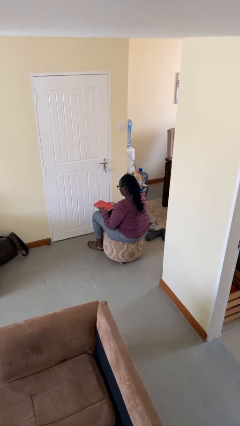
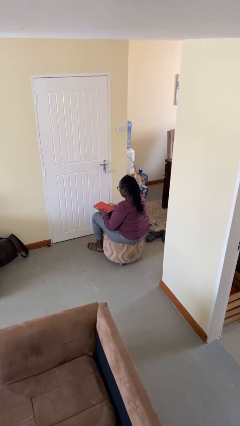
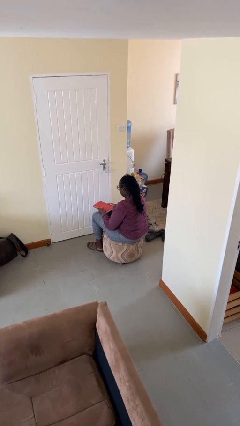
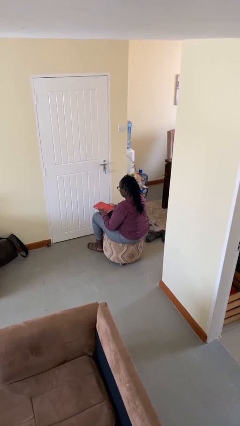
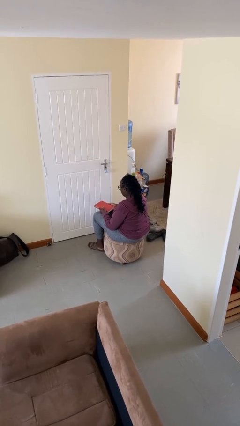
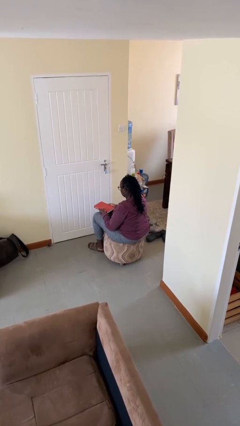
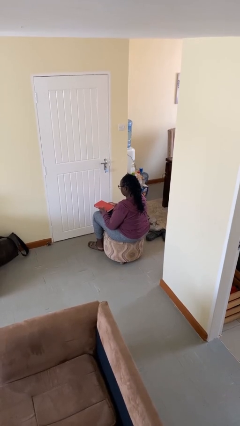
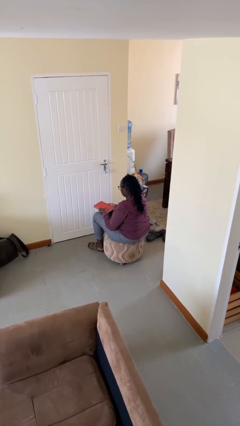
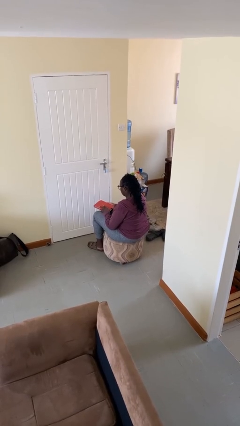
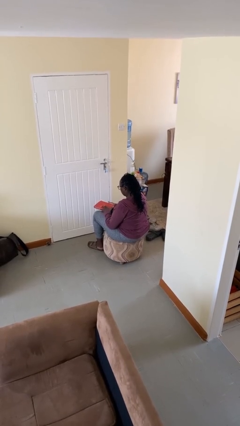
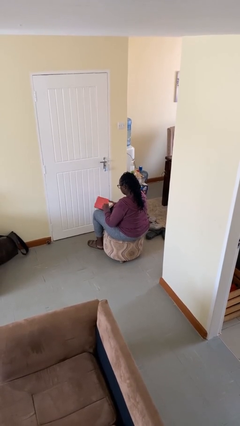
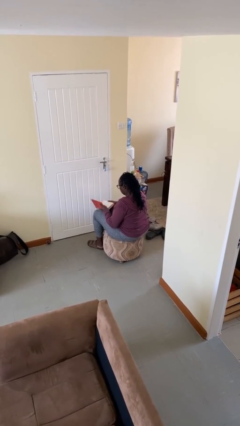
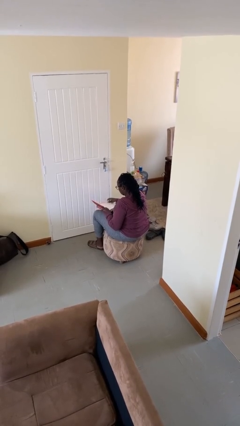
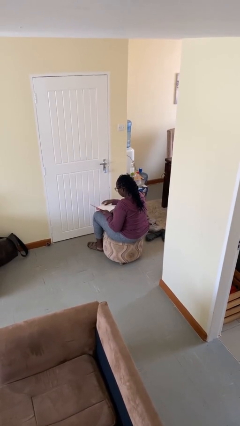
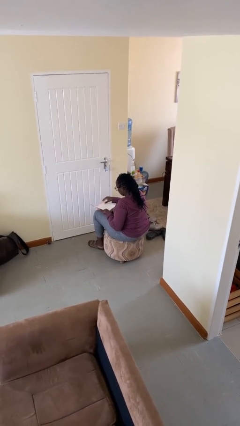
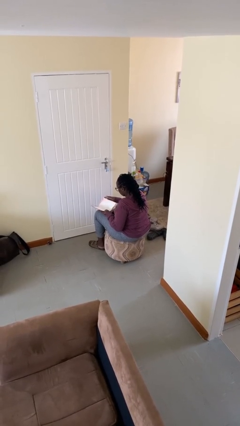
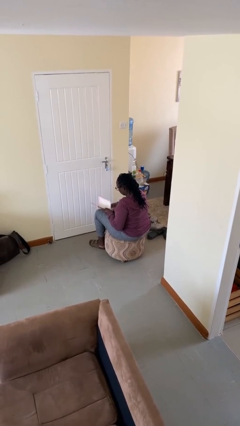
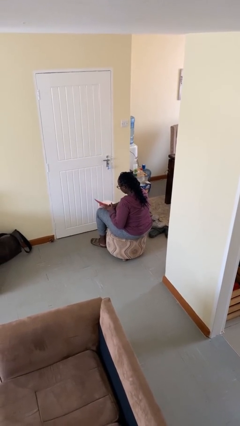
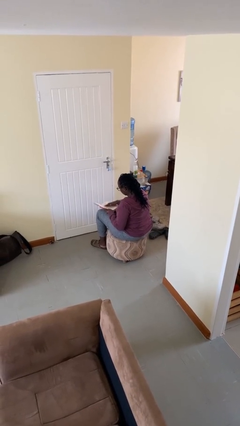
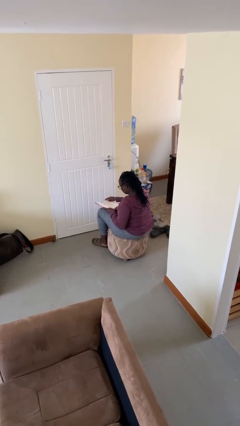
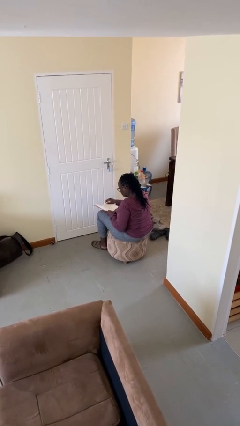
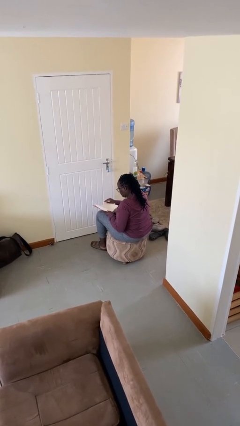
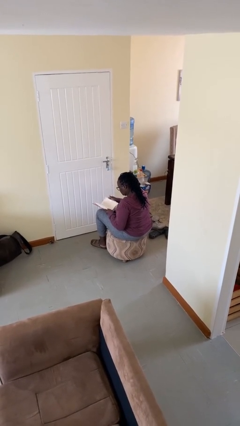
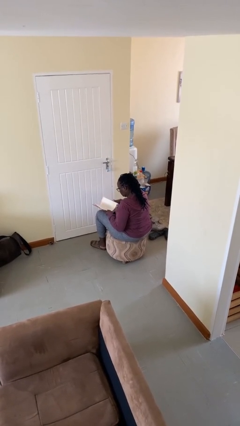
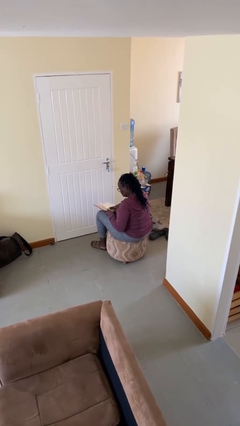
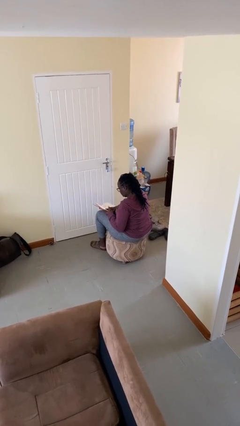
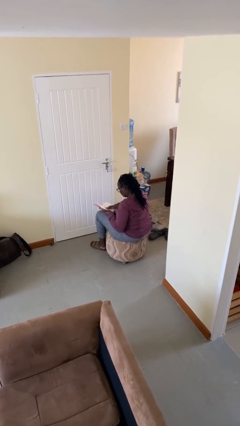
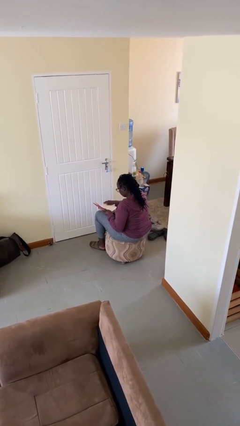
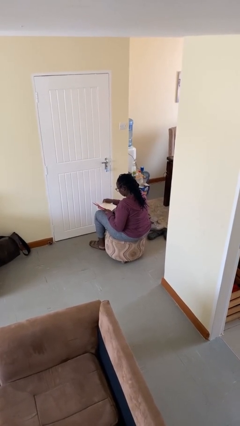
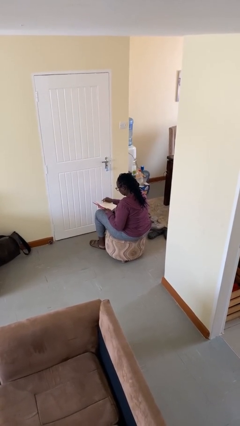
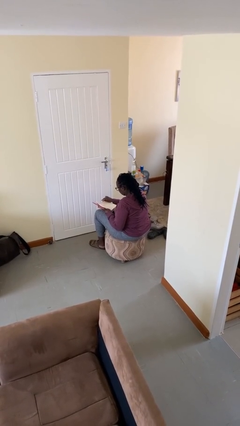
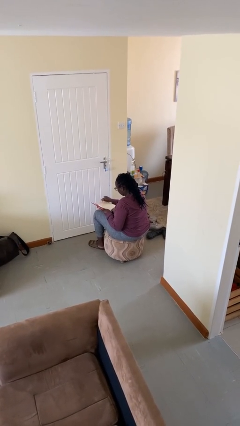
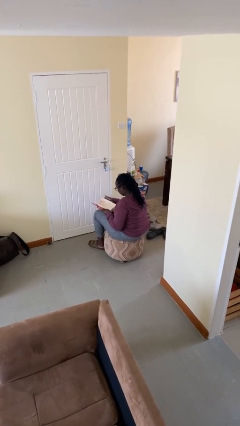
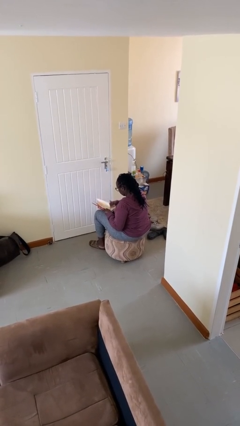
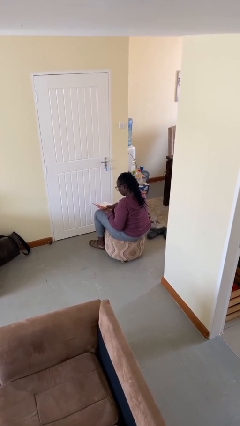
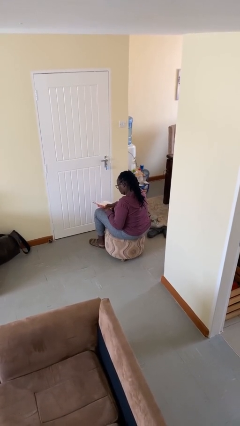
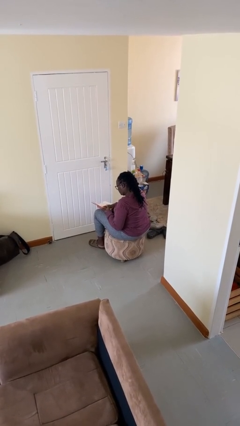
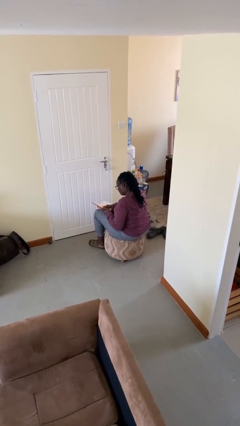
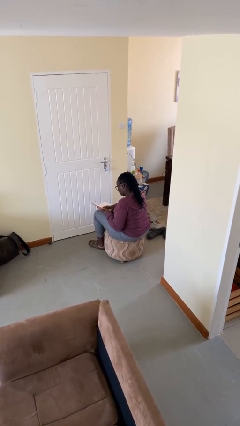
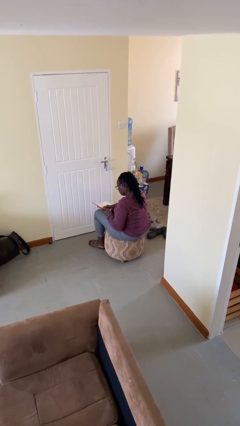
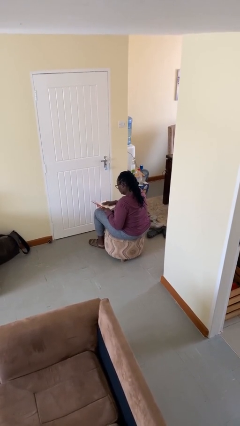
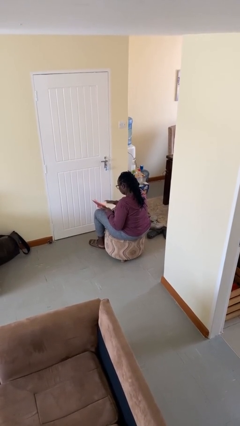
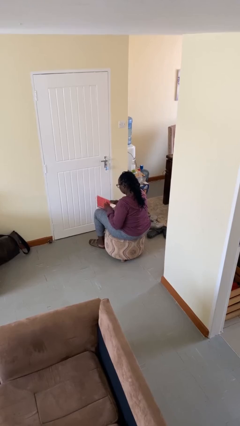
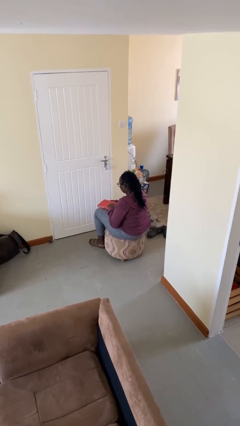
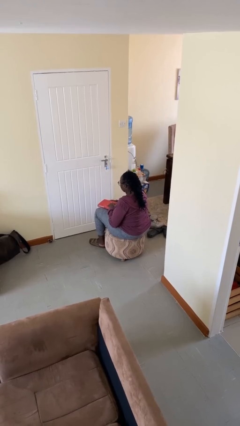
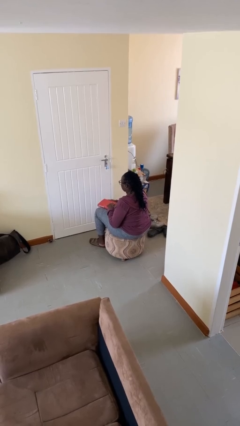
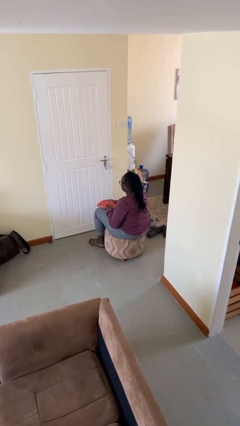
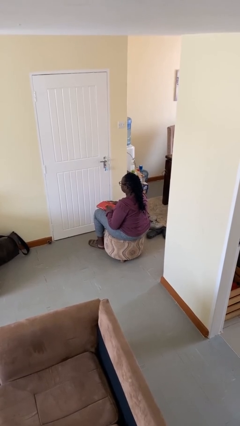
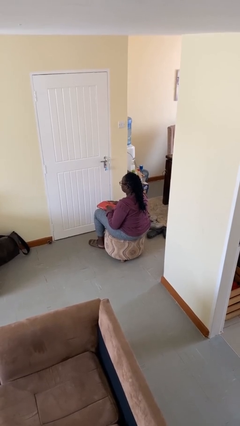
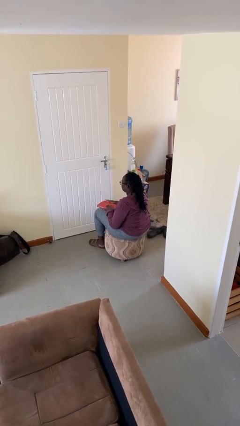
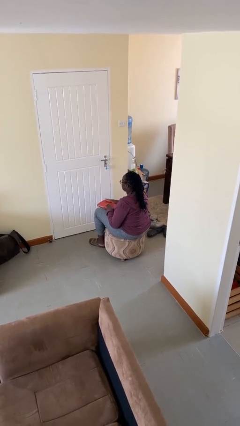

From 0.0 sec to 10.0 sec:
person reads book

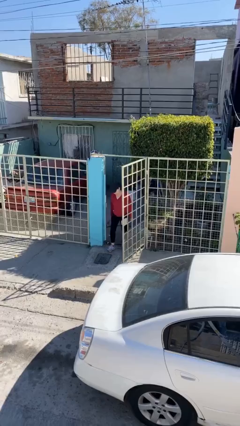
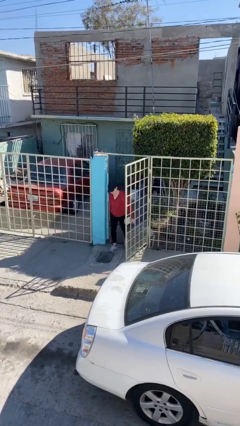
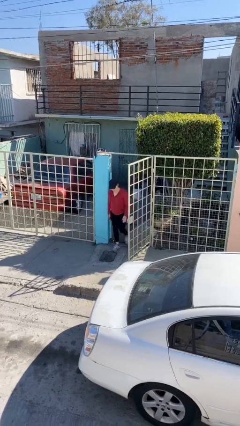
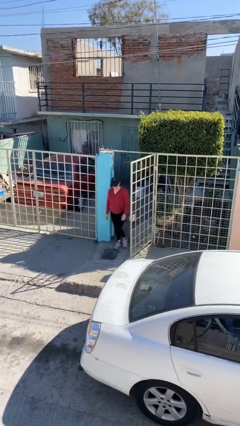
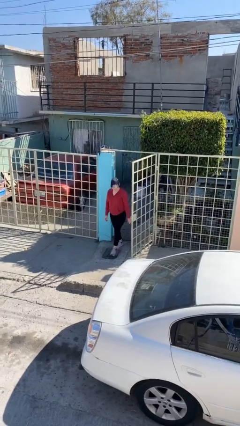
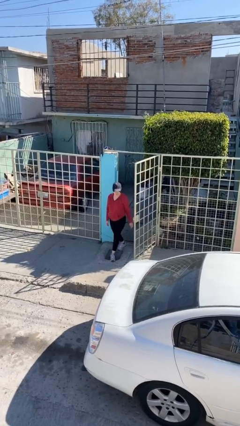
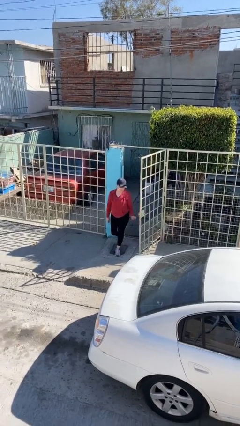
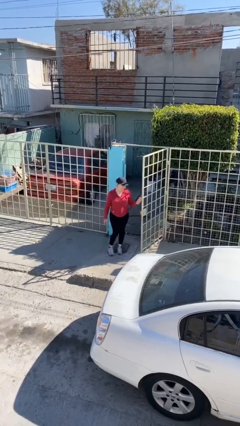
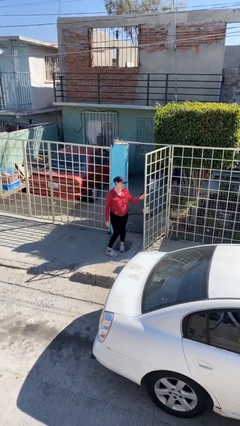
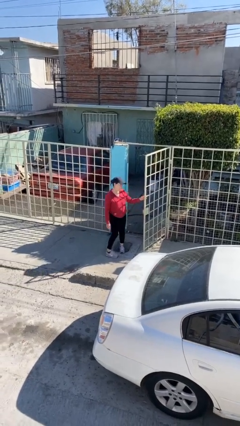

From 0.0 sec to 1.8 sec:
person enters scene through structure

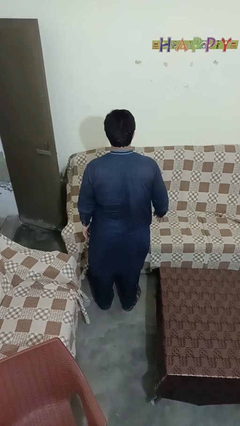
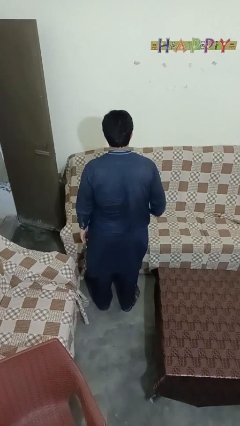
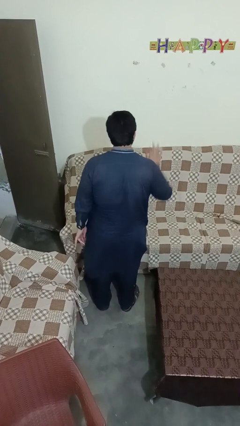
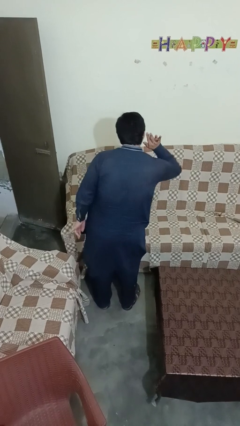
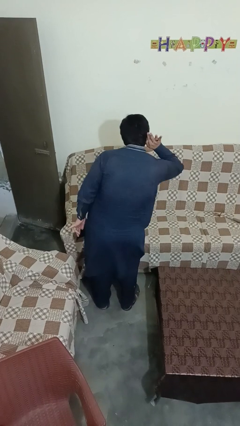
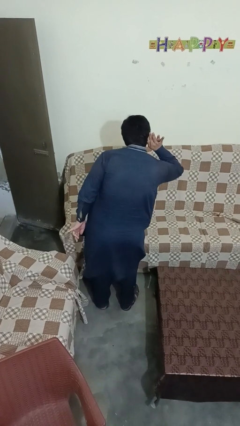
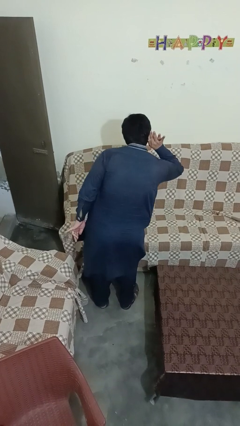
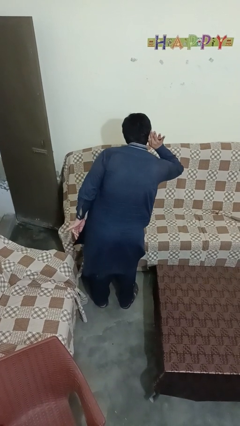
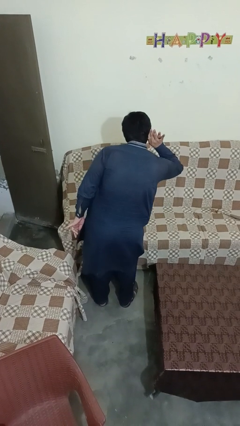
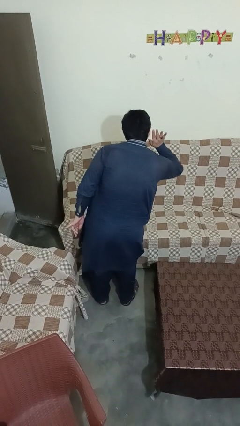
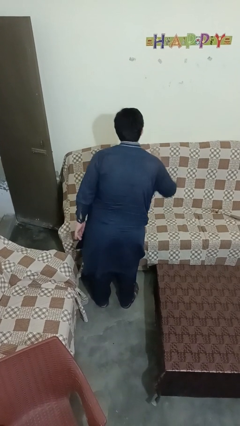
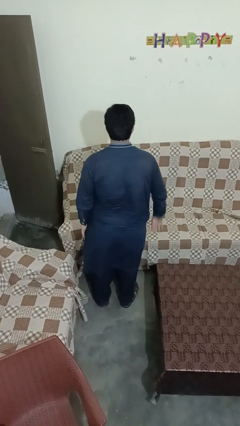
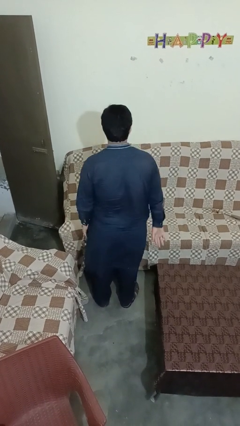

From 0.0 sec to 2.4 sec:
person gestures listen closely

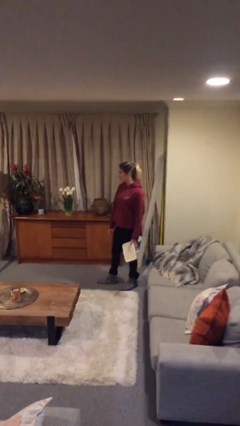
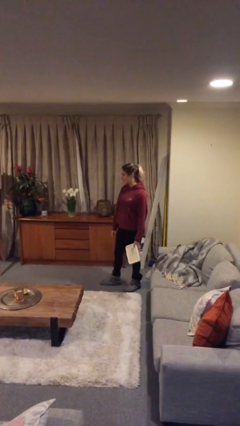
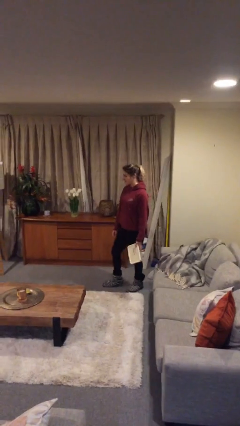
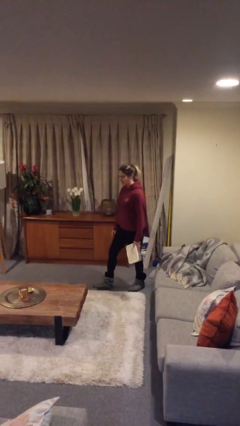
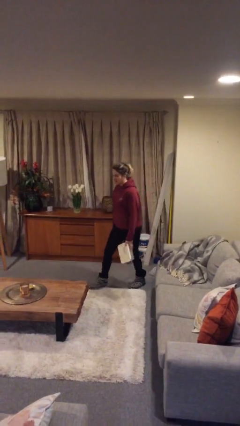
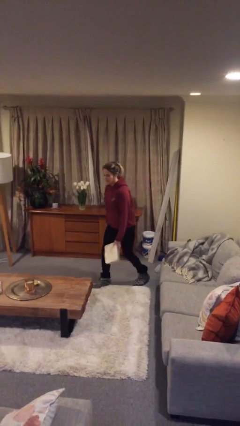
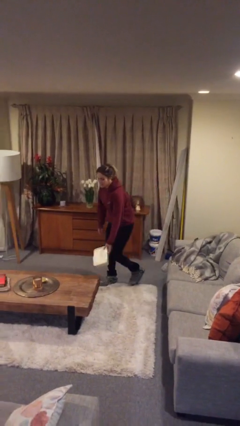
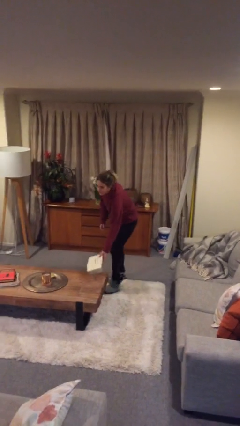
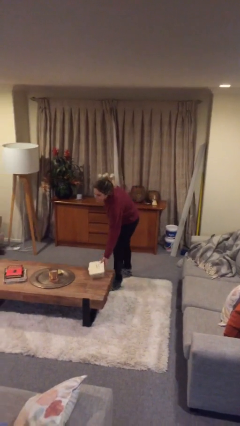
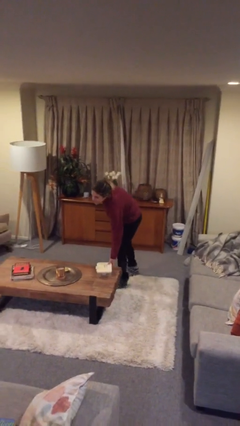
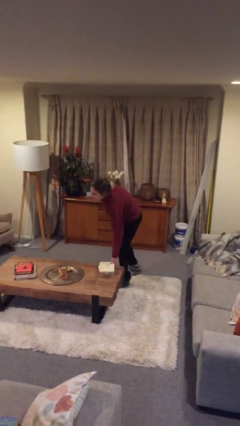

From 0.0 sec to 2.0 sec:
person puts down object on table

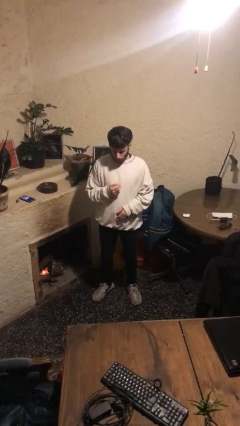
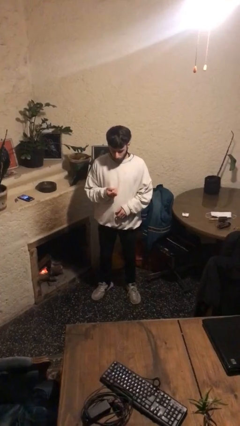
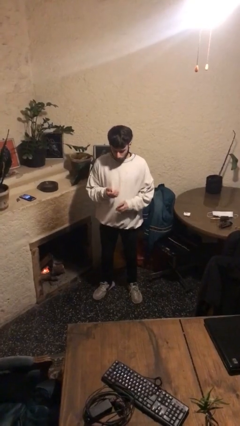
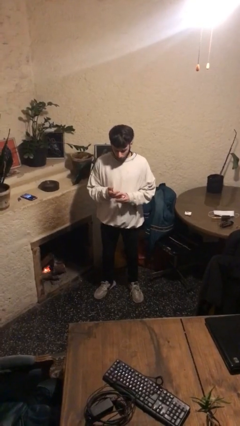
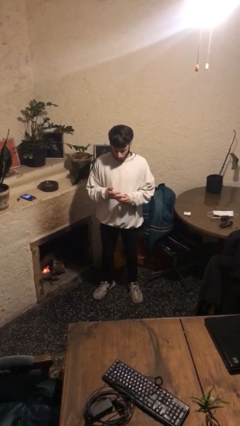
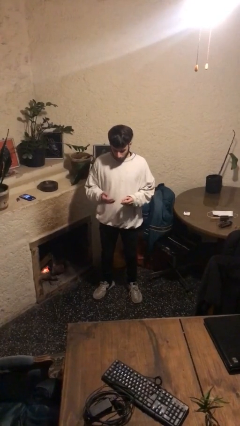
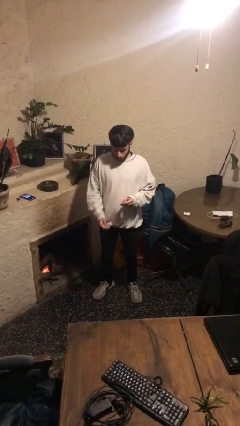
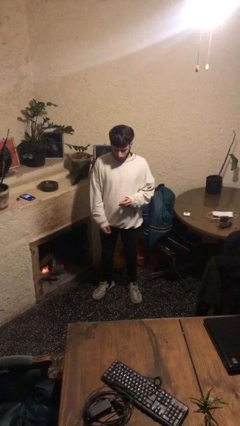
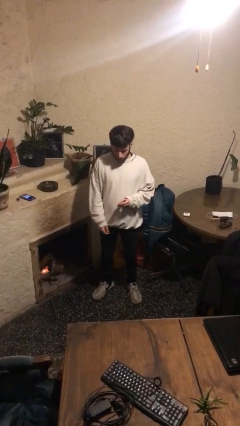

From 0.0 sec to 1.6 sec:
person takes off ring
